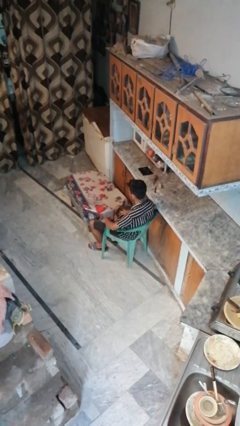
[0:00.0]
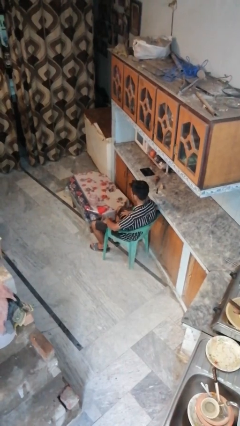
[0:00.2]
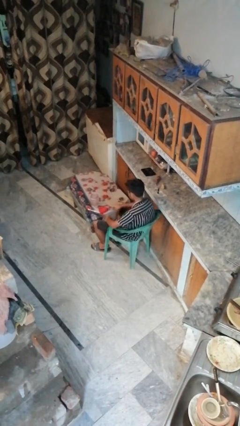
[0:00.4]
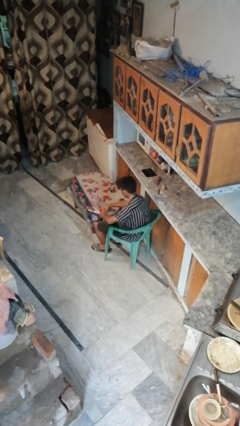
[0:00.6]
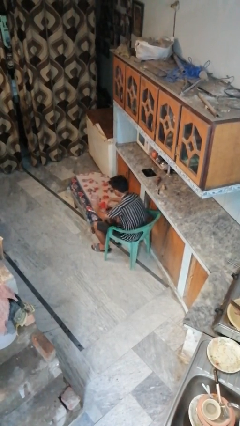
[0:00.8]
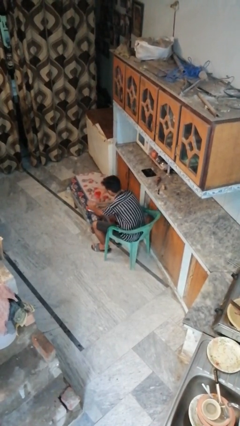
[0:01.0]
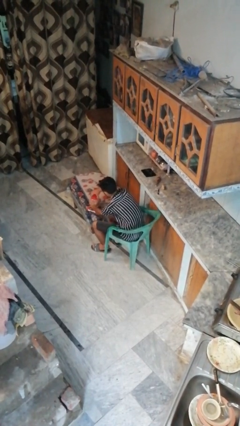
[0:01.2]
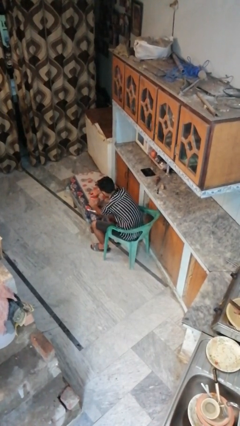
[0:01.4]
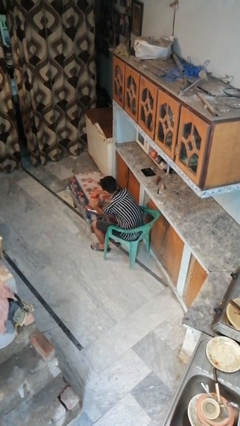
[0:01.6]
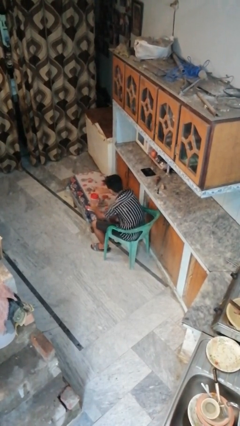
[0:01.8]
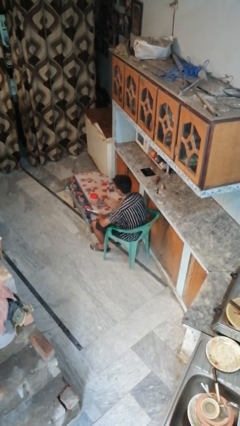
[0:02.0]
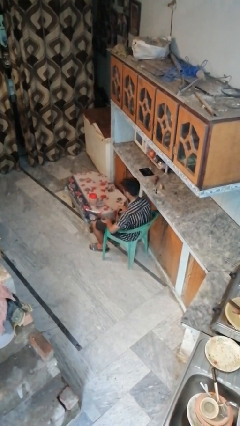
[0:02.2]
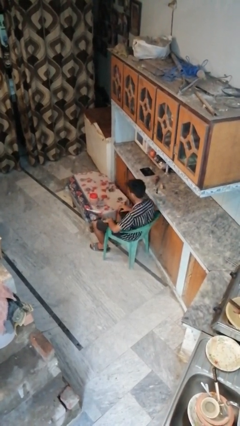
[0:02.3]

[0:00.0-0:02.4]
person closes jar

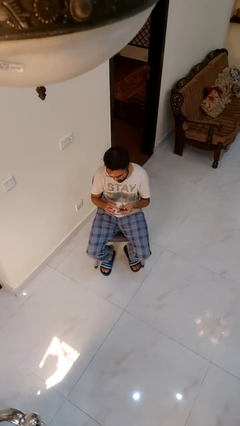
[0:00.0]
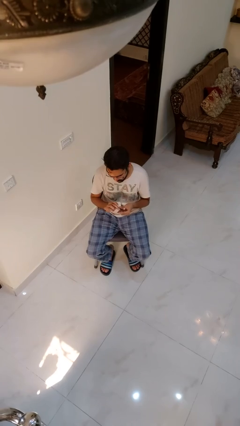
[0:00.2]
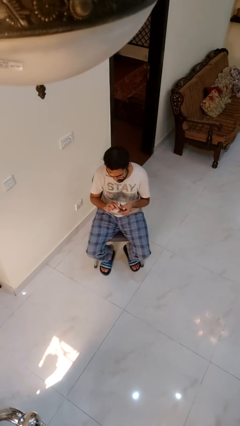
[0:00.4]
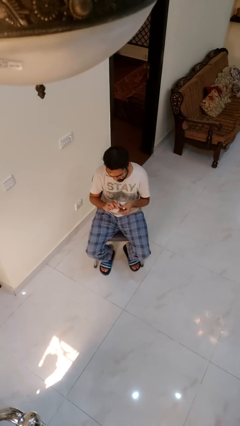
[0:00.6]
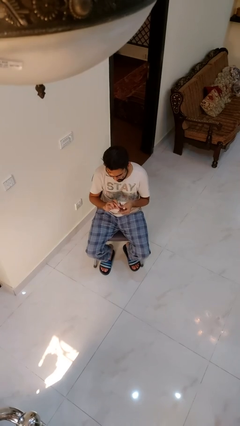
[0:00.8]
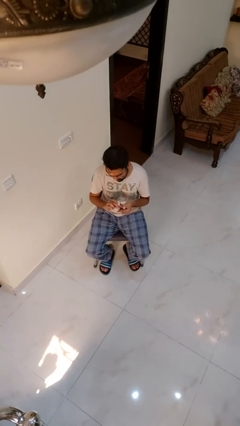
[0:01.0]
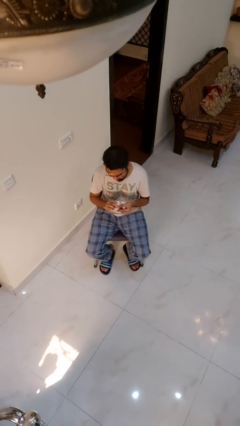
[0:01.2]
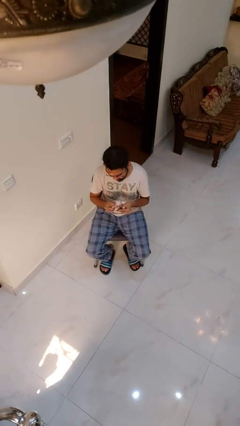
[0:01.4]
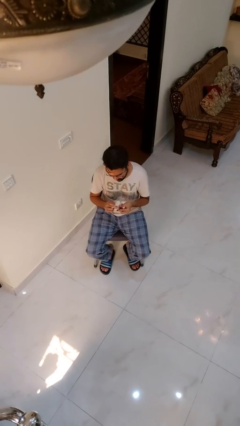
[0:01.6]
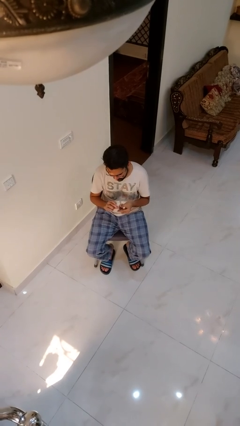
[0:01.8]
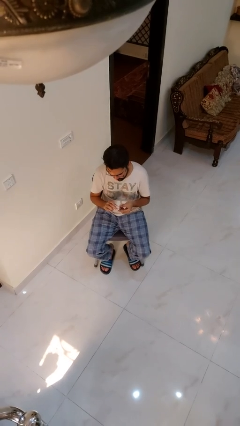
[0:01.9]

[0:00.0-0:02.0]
person files fingernails

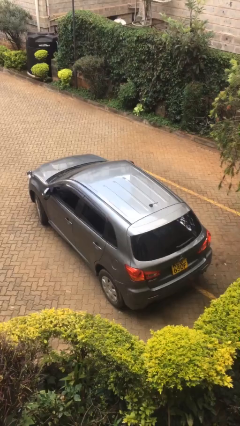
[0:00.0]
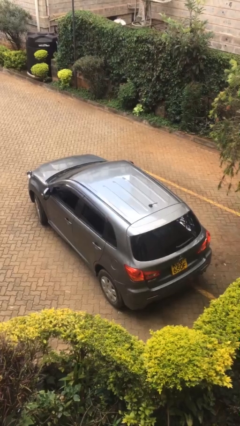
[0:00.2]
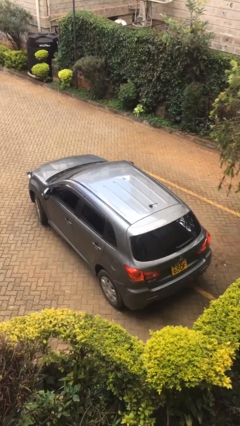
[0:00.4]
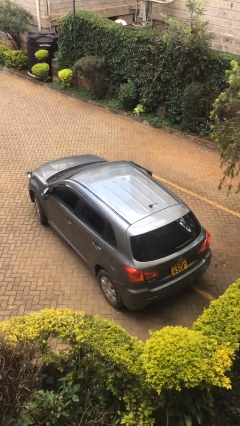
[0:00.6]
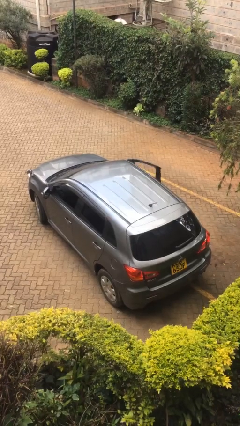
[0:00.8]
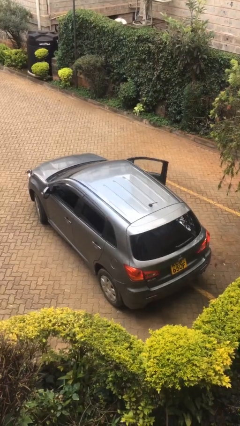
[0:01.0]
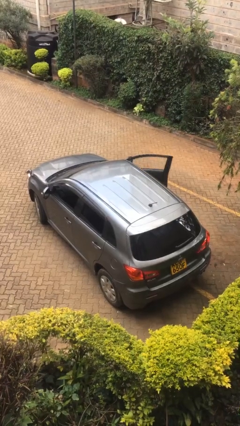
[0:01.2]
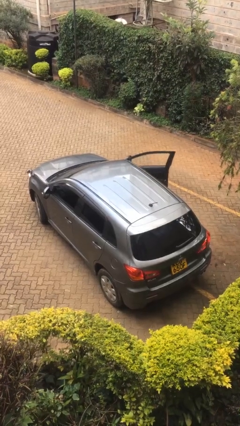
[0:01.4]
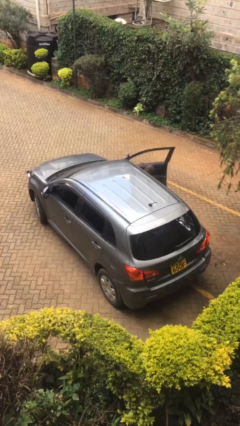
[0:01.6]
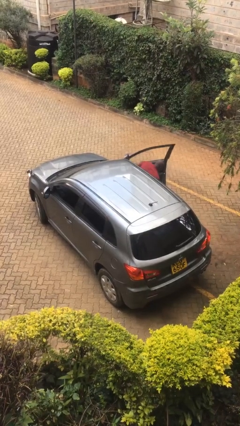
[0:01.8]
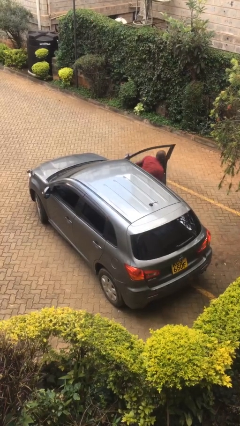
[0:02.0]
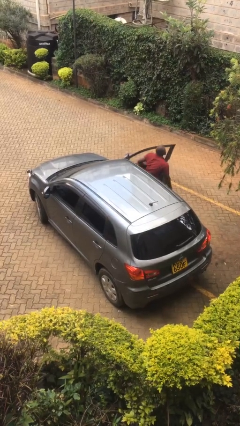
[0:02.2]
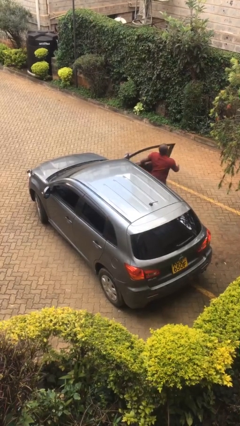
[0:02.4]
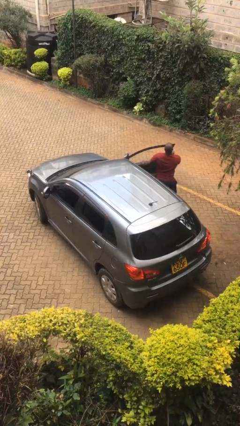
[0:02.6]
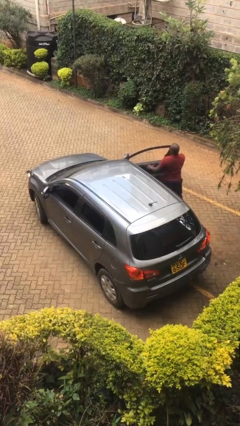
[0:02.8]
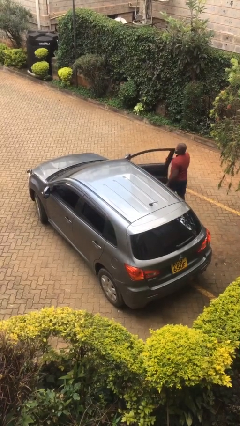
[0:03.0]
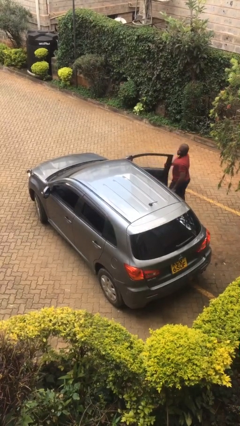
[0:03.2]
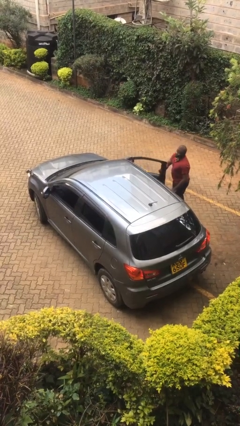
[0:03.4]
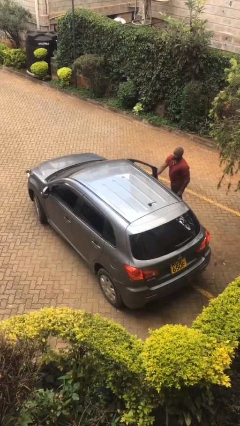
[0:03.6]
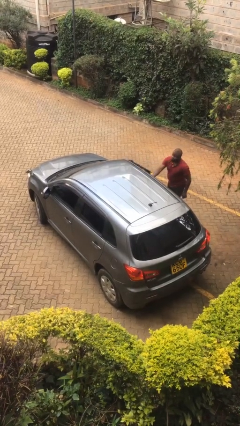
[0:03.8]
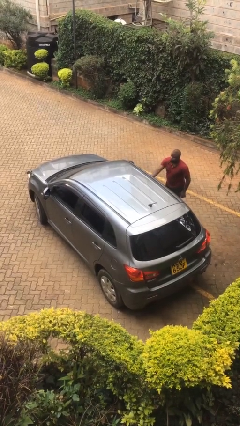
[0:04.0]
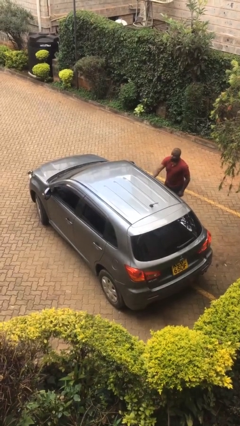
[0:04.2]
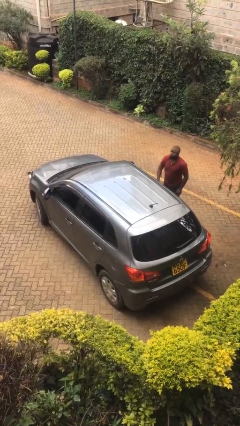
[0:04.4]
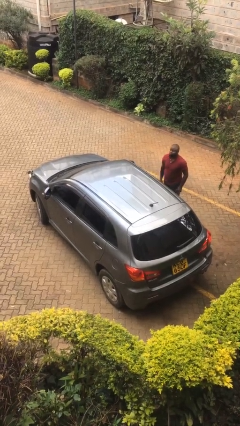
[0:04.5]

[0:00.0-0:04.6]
car drops off person

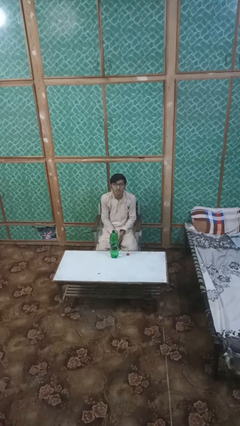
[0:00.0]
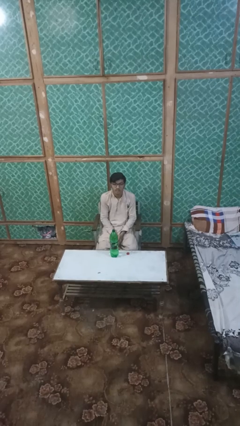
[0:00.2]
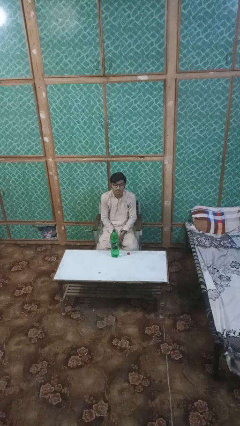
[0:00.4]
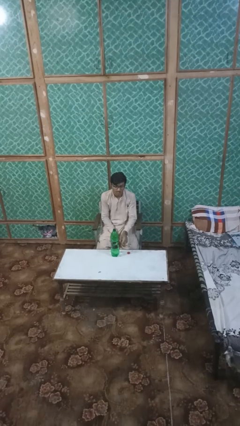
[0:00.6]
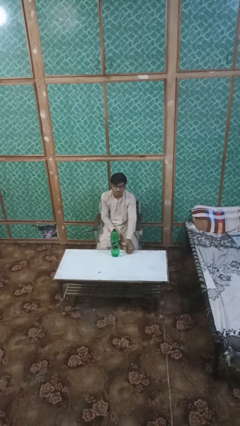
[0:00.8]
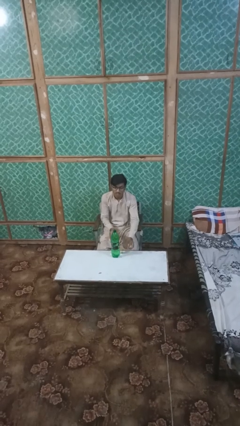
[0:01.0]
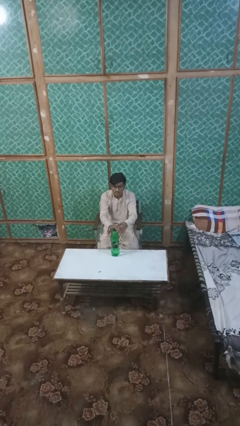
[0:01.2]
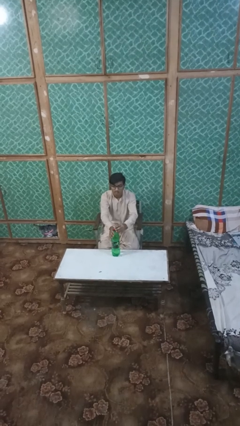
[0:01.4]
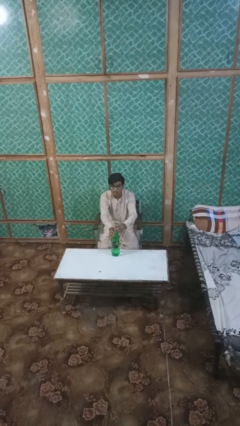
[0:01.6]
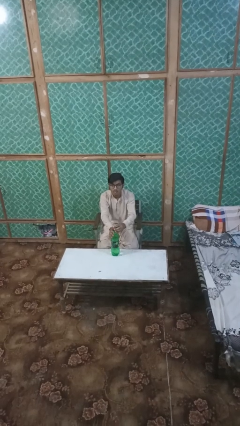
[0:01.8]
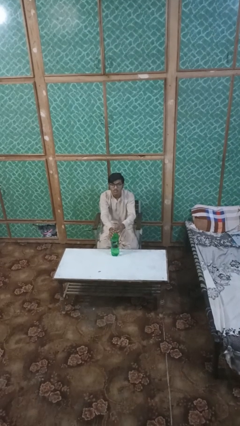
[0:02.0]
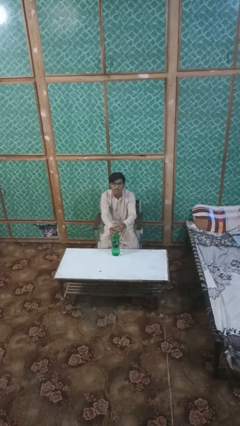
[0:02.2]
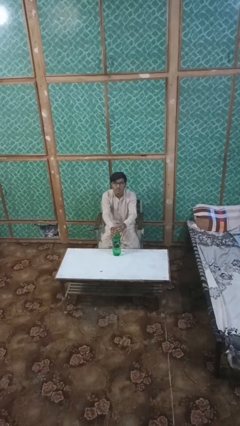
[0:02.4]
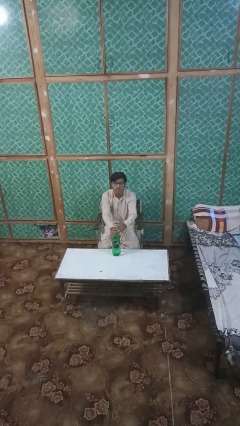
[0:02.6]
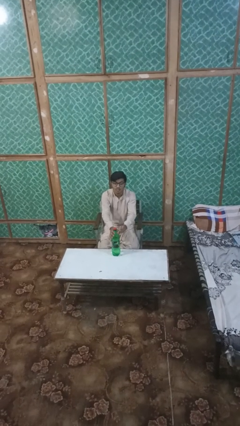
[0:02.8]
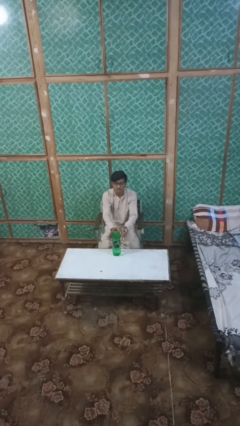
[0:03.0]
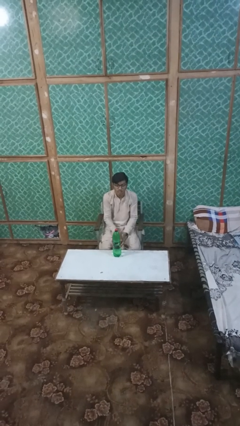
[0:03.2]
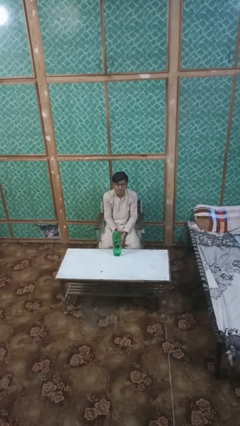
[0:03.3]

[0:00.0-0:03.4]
person screws lid to bottle

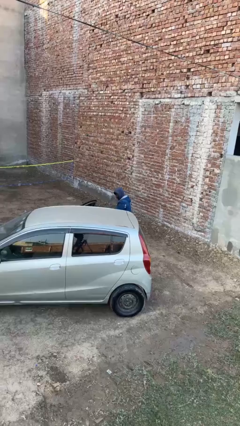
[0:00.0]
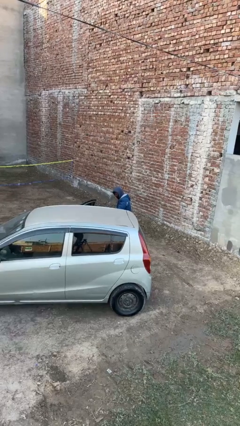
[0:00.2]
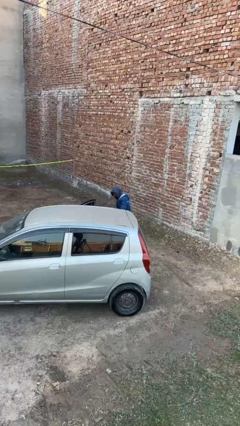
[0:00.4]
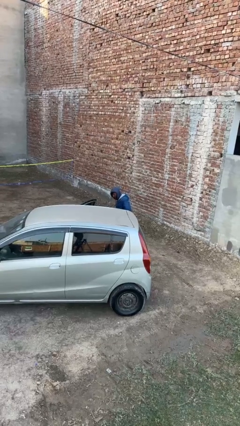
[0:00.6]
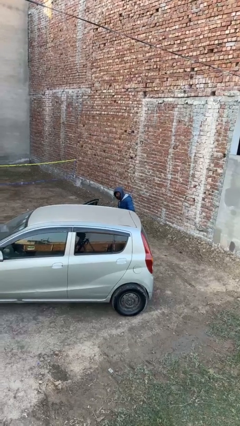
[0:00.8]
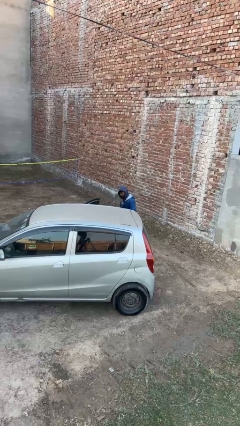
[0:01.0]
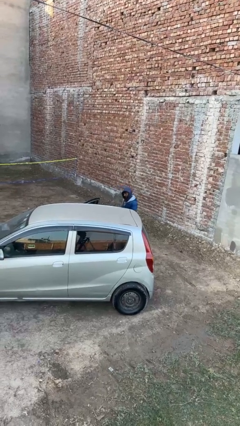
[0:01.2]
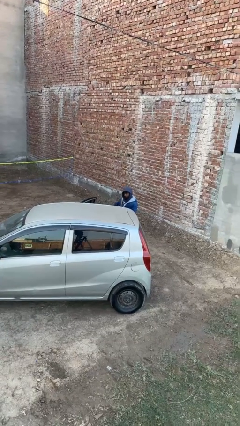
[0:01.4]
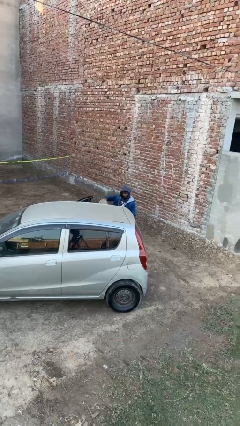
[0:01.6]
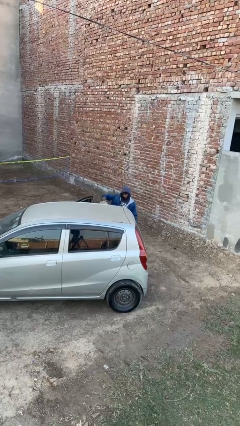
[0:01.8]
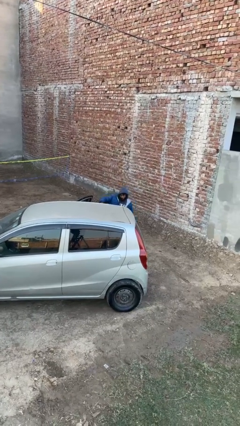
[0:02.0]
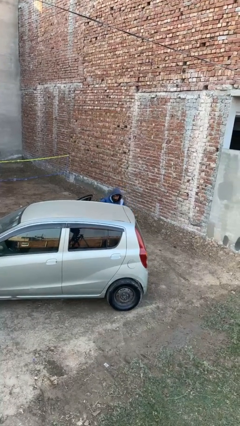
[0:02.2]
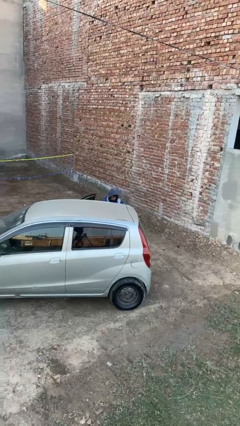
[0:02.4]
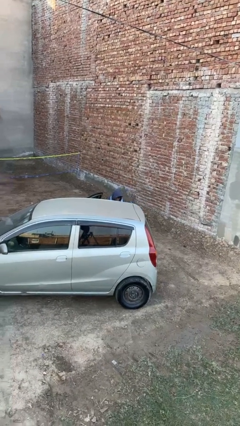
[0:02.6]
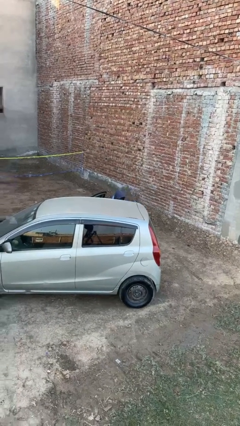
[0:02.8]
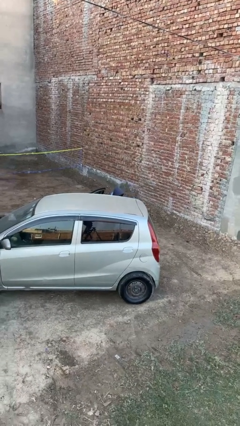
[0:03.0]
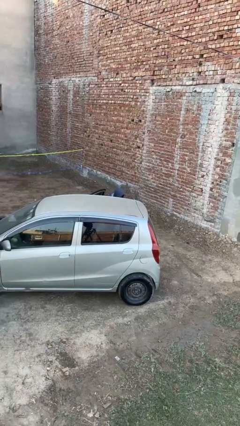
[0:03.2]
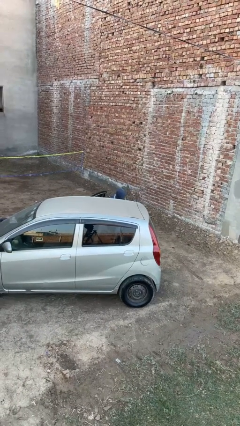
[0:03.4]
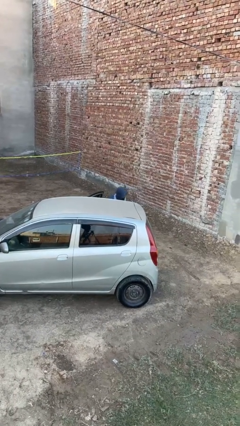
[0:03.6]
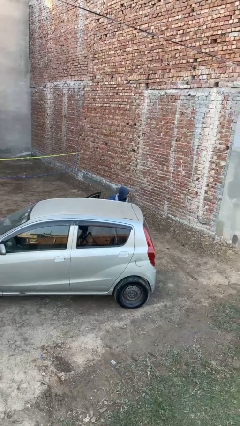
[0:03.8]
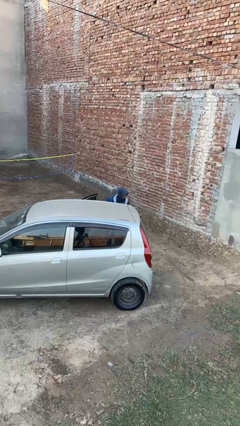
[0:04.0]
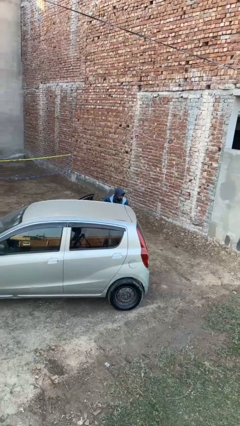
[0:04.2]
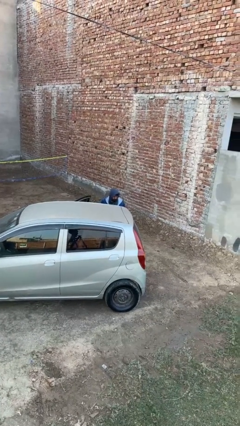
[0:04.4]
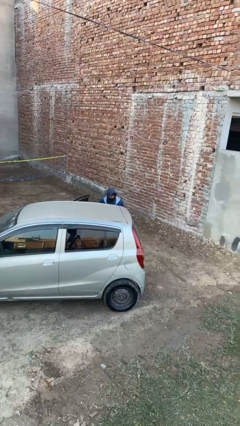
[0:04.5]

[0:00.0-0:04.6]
person loads car

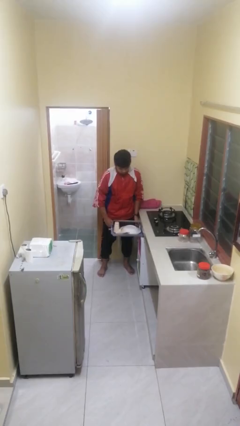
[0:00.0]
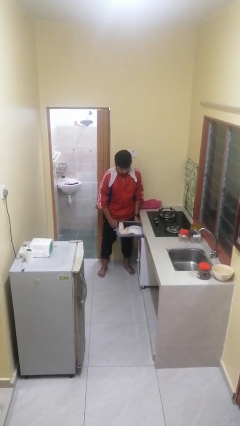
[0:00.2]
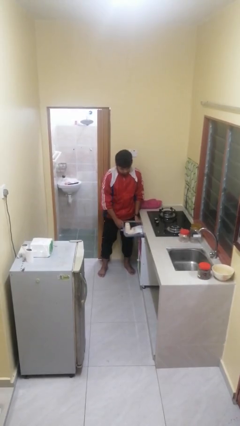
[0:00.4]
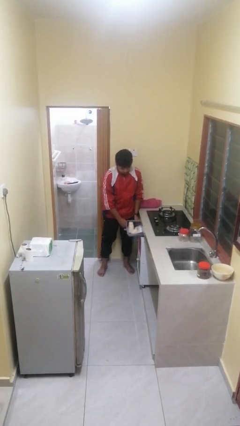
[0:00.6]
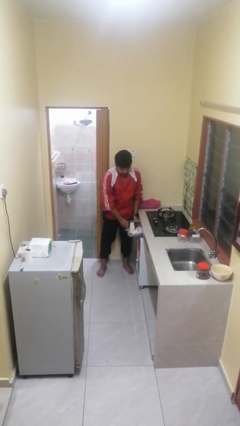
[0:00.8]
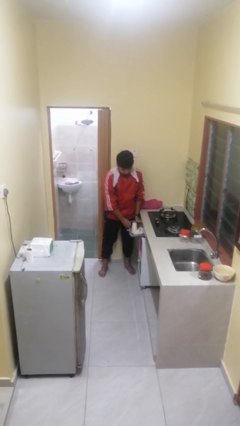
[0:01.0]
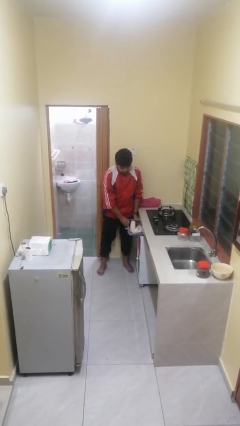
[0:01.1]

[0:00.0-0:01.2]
person closes kitchen drawer
